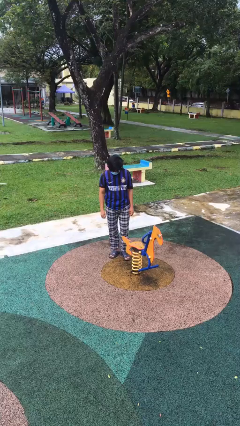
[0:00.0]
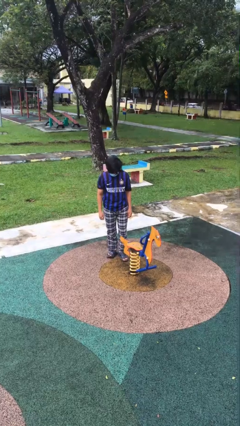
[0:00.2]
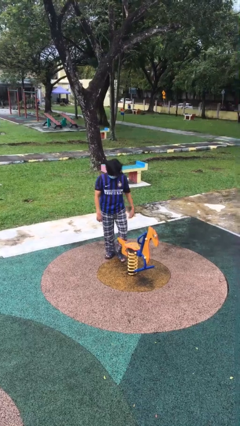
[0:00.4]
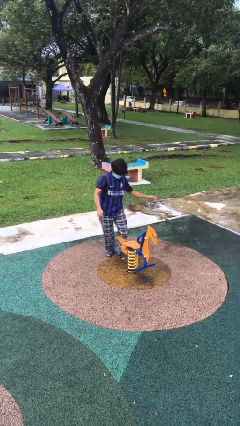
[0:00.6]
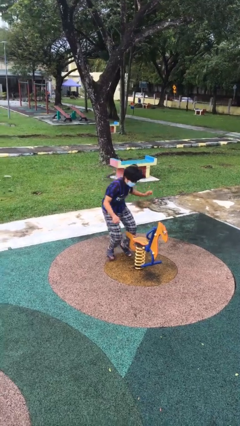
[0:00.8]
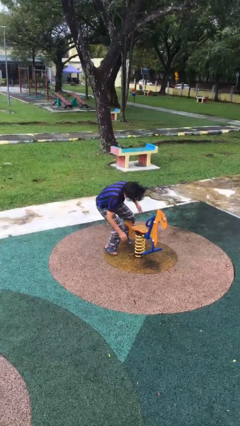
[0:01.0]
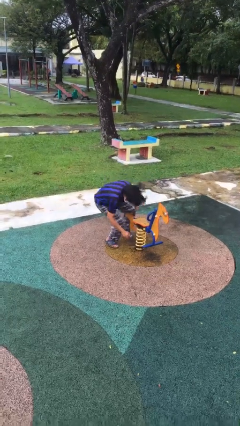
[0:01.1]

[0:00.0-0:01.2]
person trips on object on floor

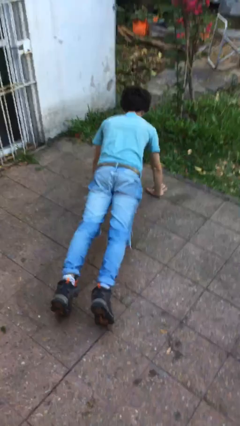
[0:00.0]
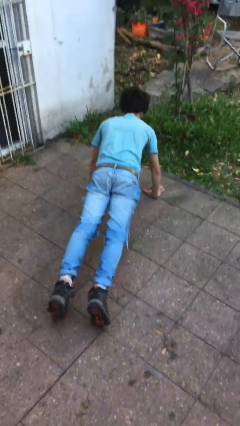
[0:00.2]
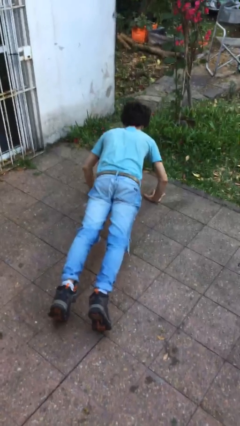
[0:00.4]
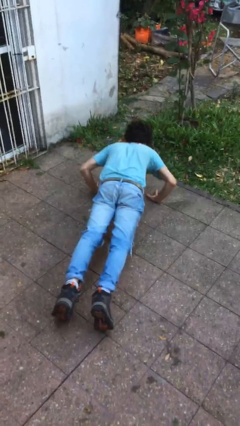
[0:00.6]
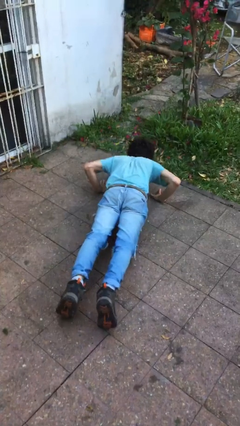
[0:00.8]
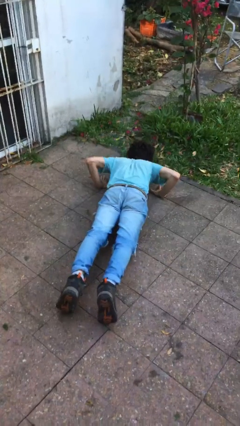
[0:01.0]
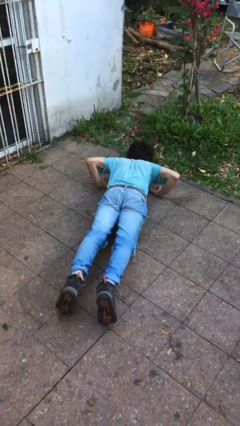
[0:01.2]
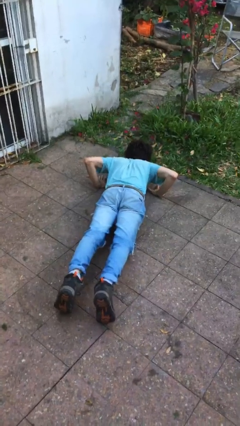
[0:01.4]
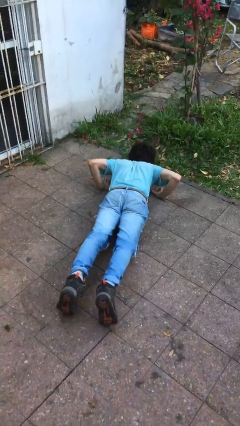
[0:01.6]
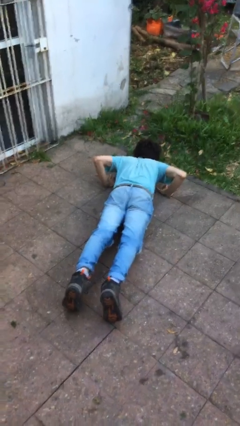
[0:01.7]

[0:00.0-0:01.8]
person exercises with pushup

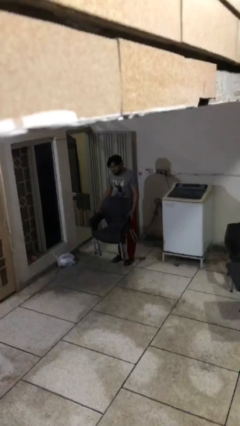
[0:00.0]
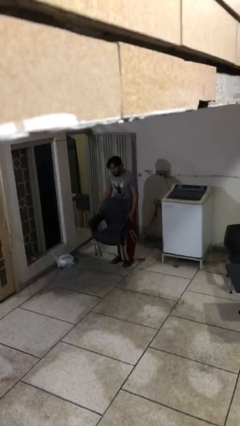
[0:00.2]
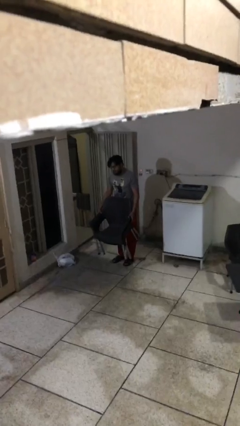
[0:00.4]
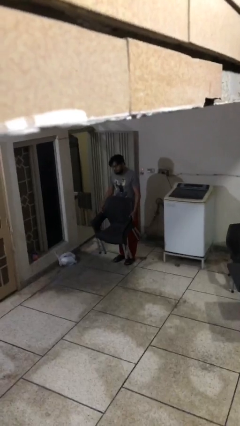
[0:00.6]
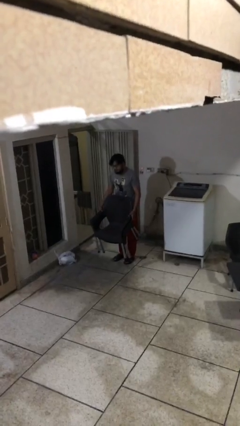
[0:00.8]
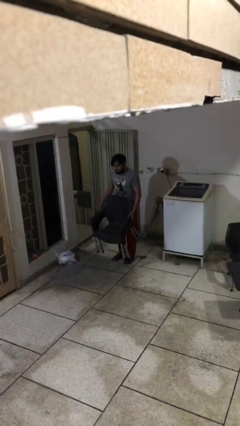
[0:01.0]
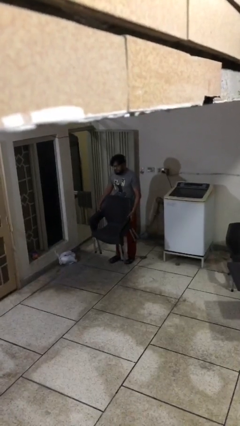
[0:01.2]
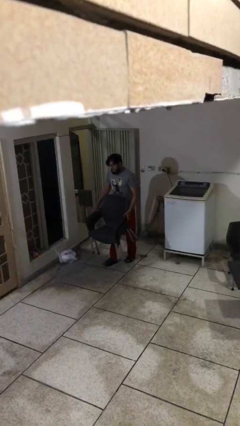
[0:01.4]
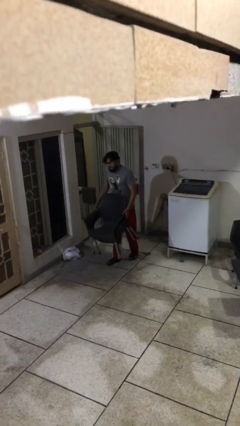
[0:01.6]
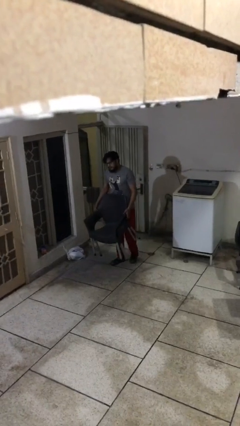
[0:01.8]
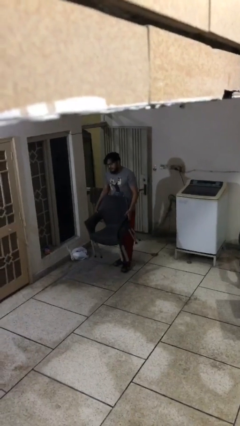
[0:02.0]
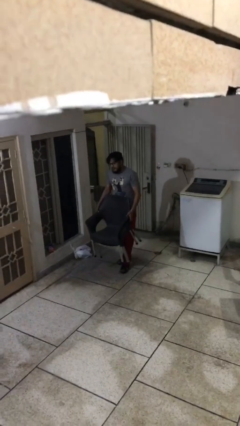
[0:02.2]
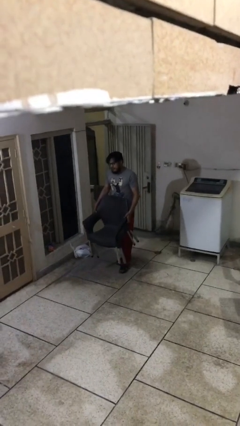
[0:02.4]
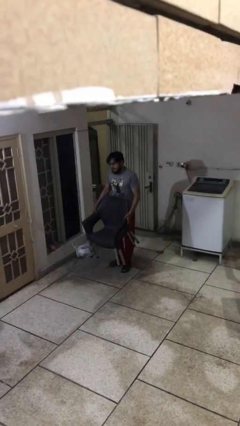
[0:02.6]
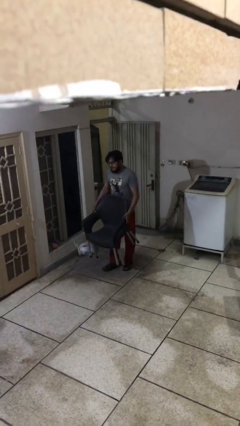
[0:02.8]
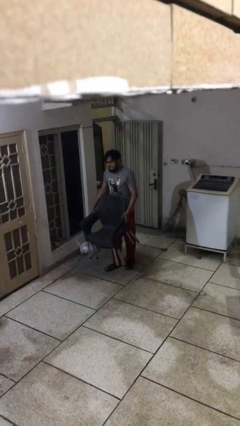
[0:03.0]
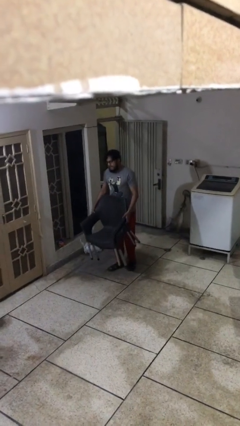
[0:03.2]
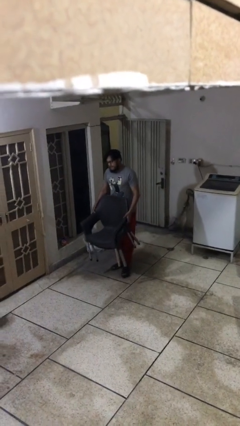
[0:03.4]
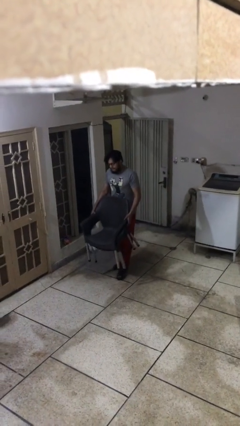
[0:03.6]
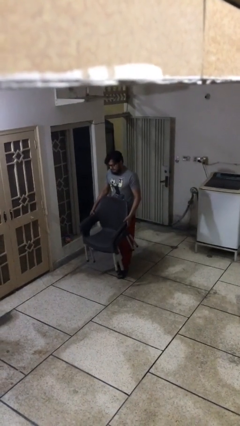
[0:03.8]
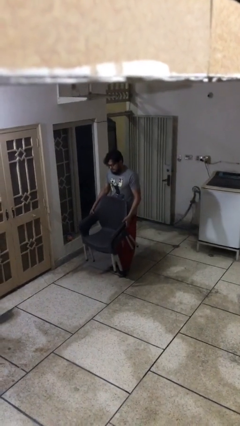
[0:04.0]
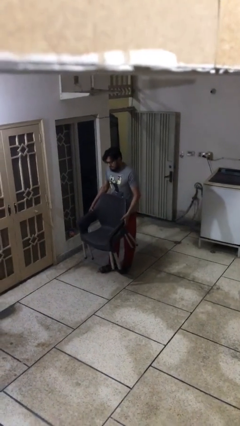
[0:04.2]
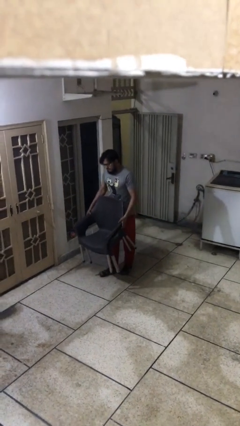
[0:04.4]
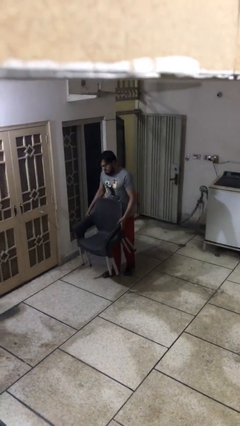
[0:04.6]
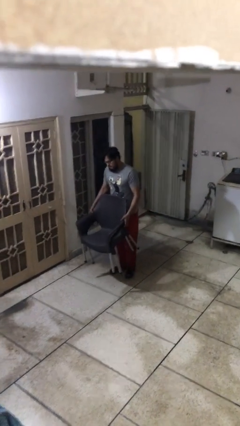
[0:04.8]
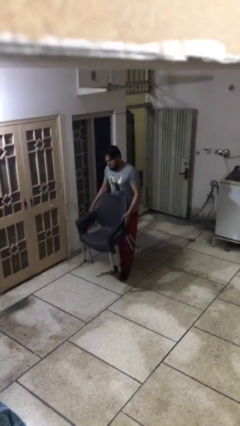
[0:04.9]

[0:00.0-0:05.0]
person carries heavy object

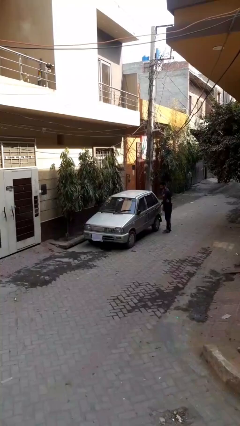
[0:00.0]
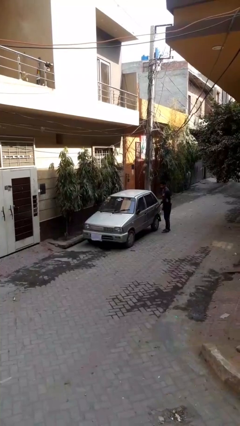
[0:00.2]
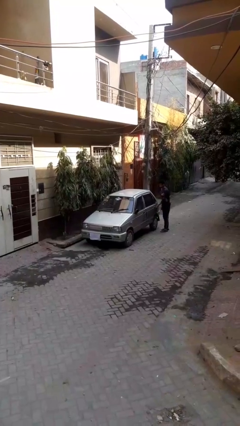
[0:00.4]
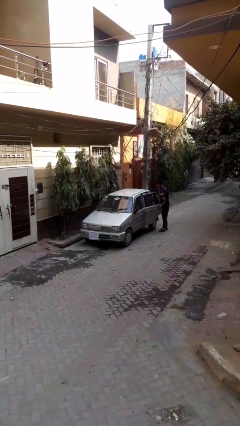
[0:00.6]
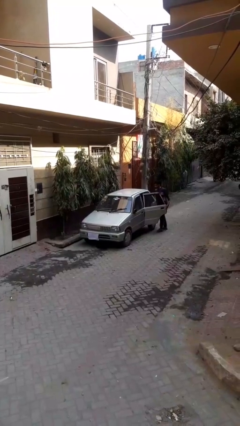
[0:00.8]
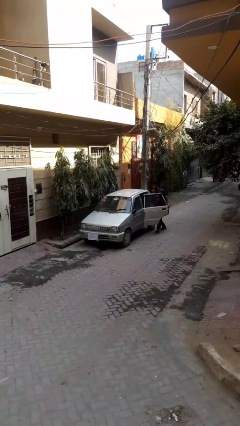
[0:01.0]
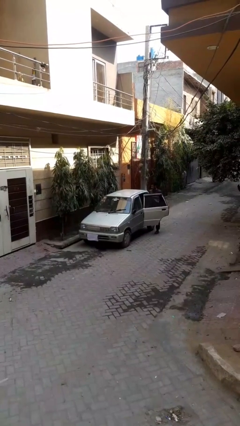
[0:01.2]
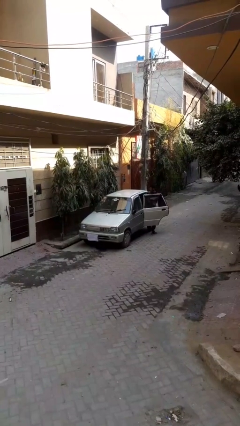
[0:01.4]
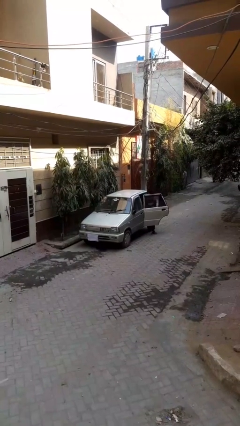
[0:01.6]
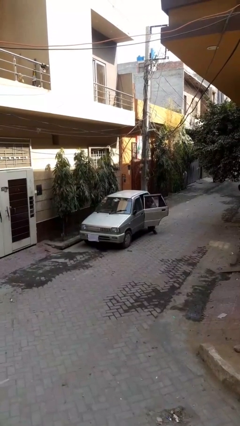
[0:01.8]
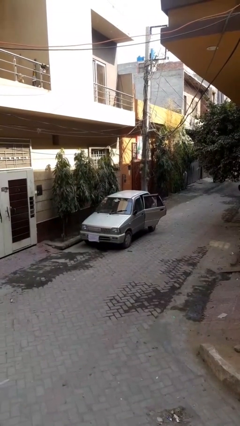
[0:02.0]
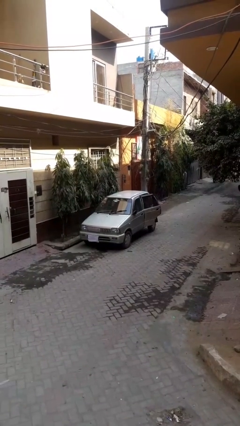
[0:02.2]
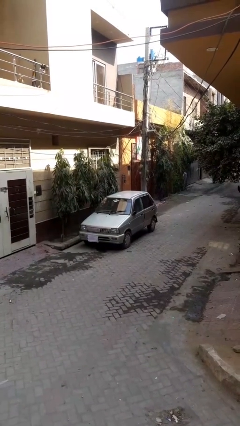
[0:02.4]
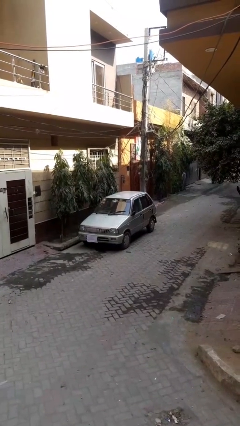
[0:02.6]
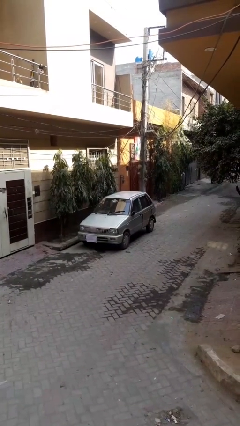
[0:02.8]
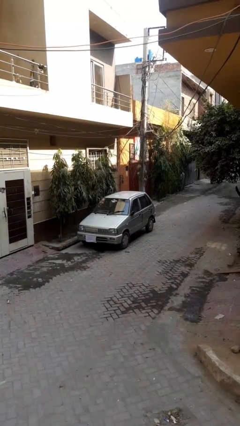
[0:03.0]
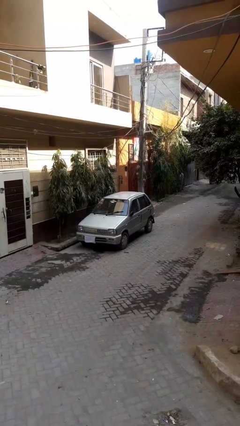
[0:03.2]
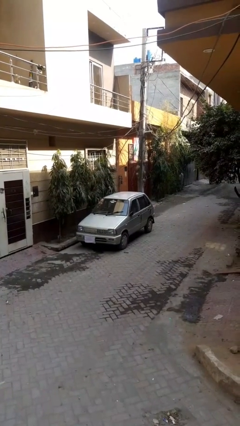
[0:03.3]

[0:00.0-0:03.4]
car picks up person

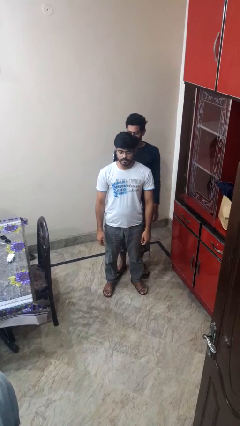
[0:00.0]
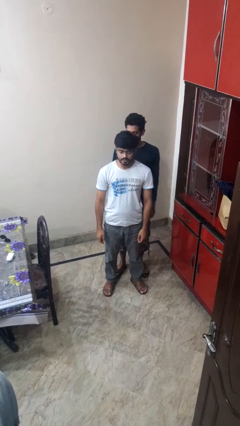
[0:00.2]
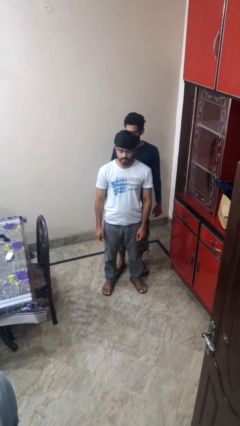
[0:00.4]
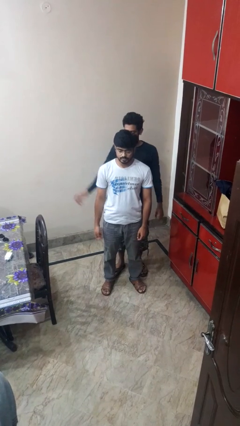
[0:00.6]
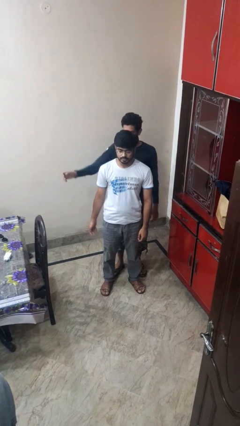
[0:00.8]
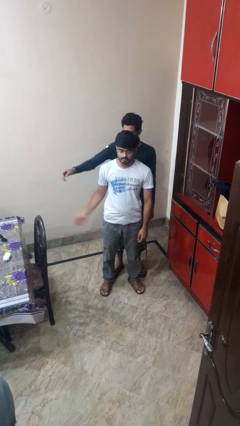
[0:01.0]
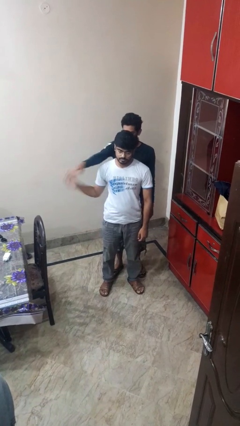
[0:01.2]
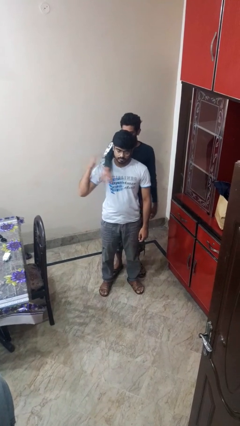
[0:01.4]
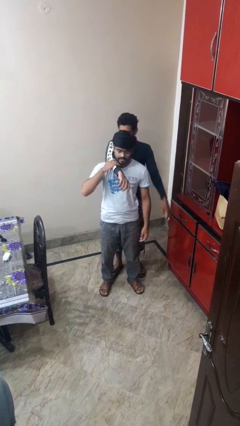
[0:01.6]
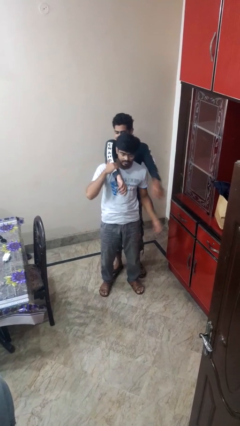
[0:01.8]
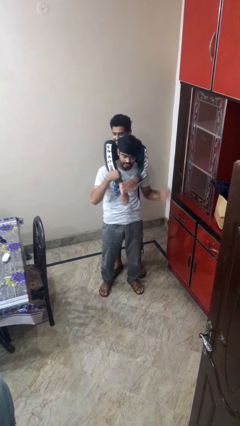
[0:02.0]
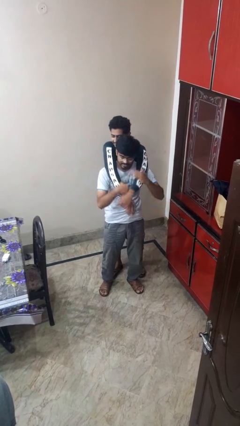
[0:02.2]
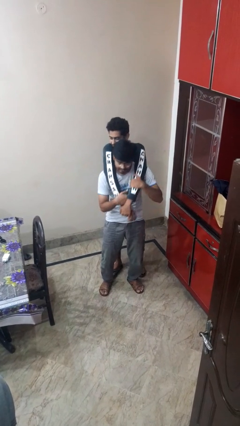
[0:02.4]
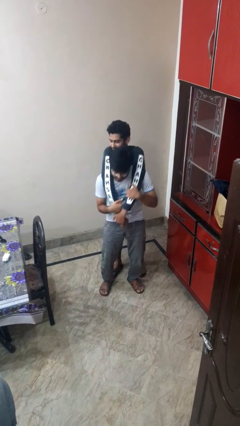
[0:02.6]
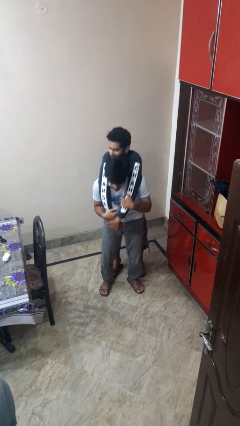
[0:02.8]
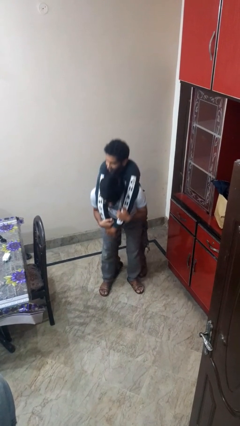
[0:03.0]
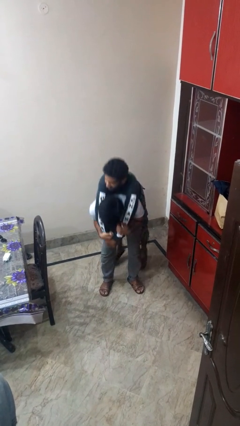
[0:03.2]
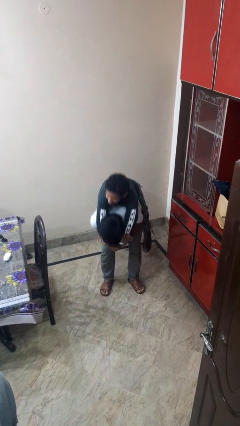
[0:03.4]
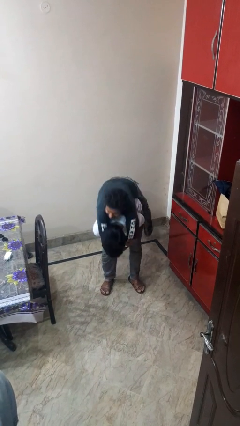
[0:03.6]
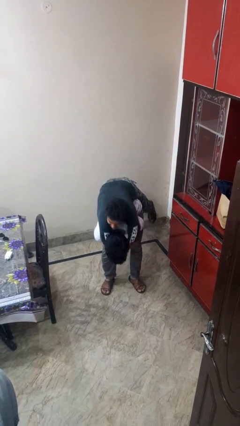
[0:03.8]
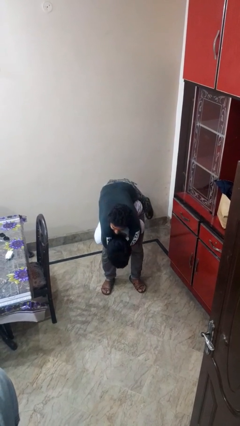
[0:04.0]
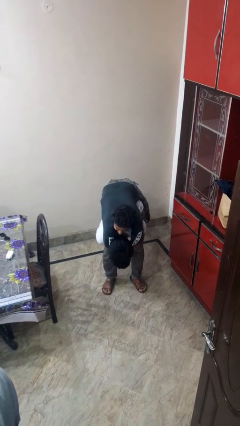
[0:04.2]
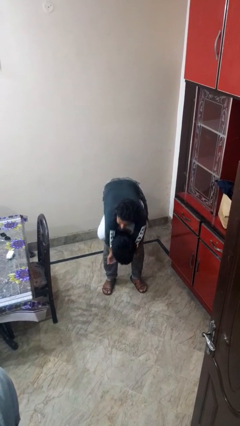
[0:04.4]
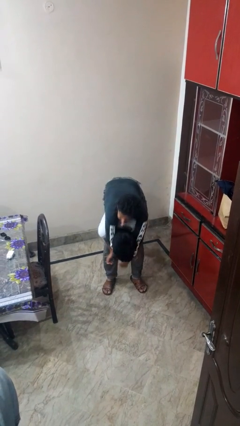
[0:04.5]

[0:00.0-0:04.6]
person carries person over shoulder

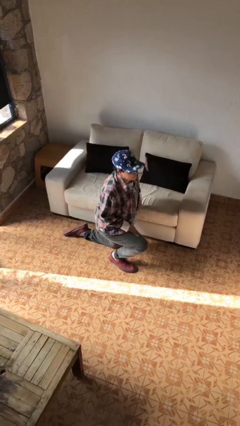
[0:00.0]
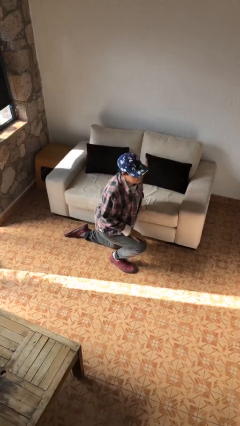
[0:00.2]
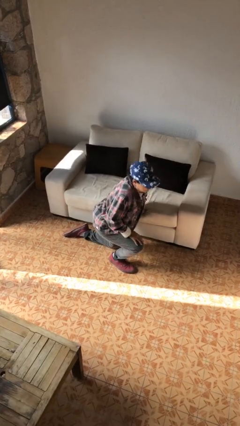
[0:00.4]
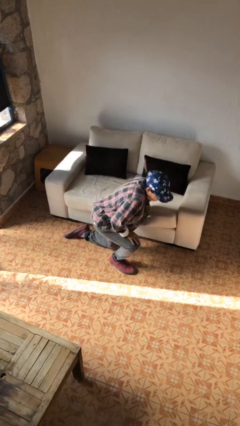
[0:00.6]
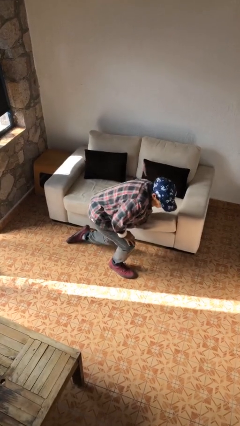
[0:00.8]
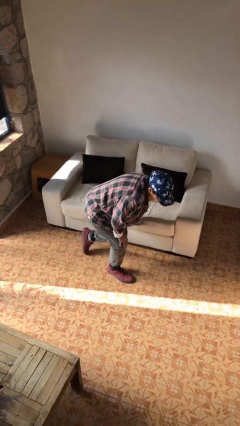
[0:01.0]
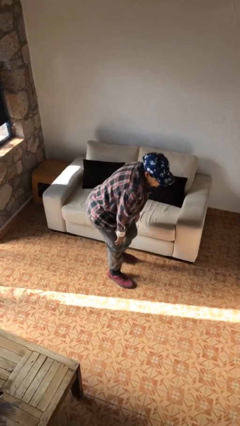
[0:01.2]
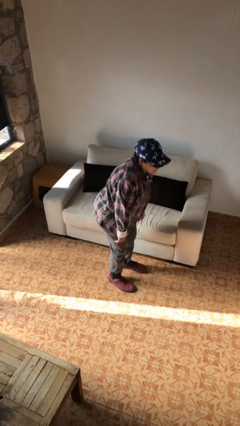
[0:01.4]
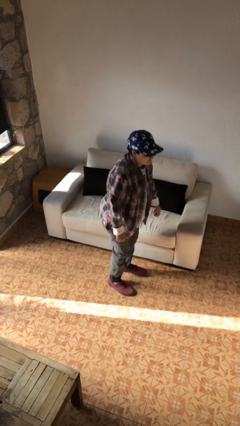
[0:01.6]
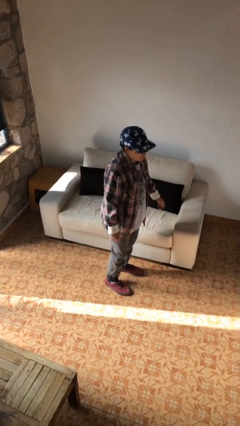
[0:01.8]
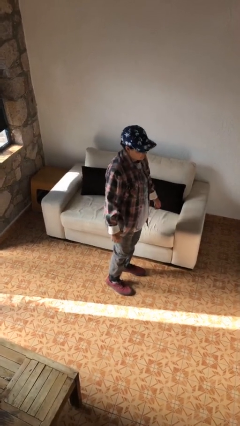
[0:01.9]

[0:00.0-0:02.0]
person stands up from floor
